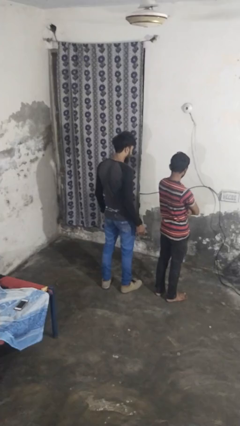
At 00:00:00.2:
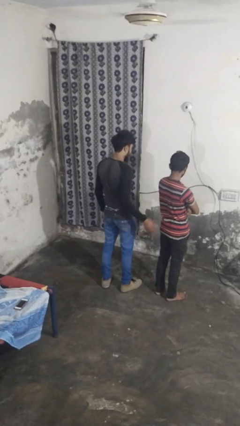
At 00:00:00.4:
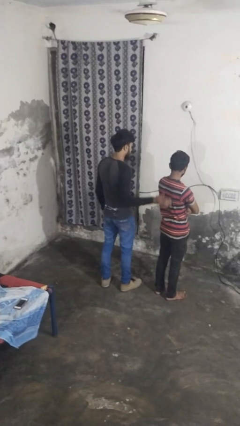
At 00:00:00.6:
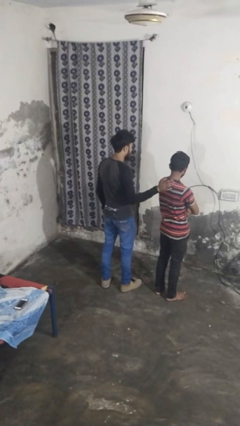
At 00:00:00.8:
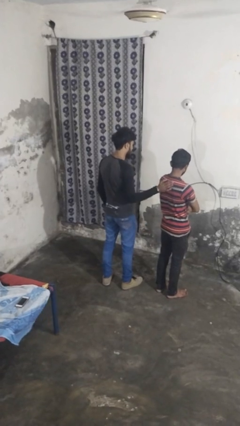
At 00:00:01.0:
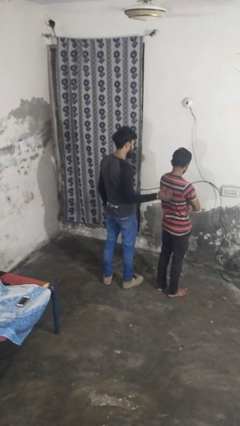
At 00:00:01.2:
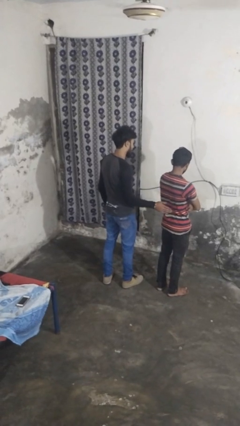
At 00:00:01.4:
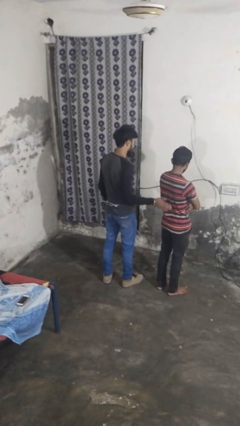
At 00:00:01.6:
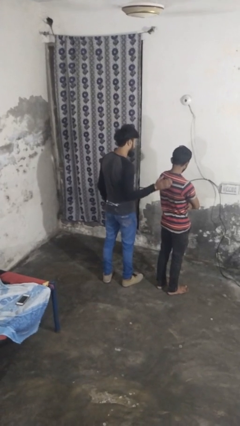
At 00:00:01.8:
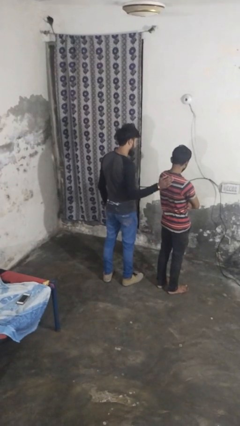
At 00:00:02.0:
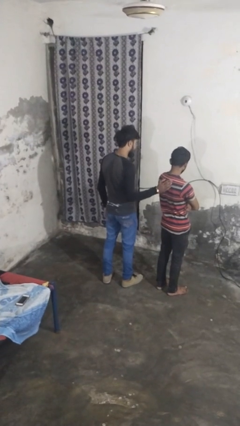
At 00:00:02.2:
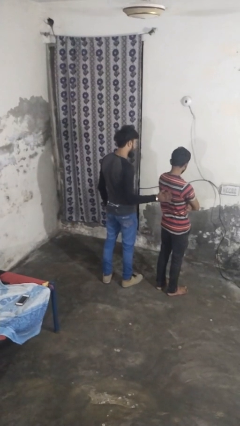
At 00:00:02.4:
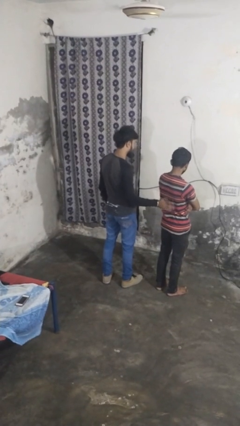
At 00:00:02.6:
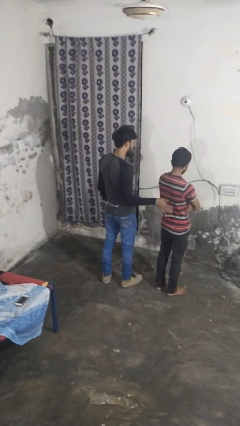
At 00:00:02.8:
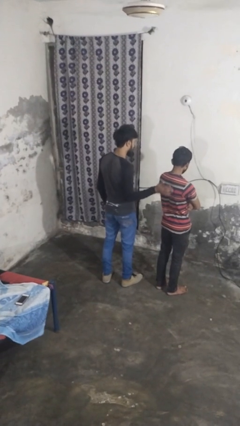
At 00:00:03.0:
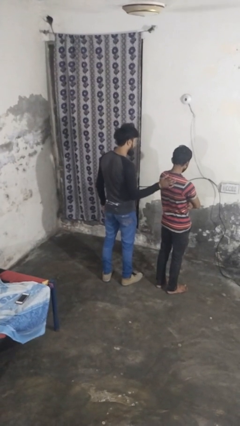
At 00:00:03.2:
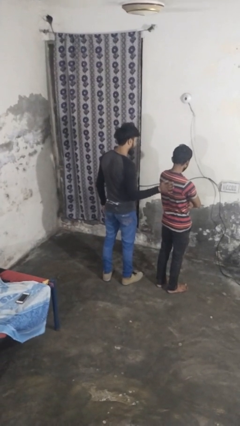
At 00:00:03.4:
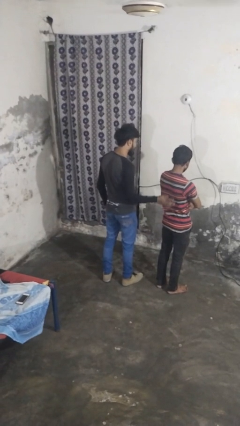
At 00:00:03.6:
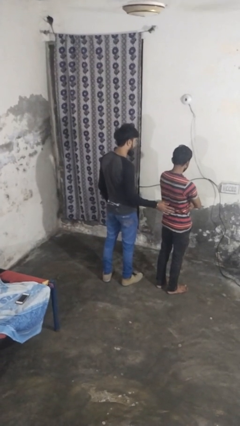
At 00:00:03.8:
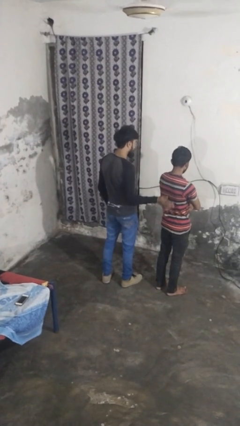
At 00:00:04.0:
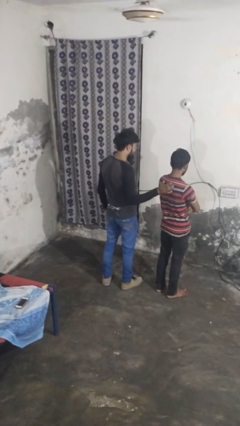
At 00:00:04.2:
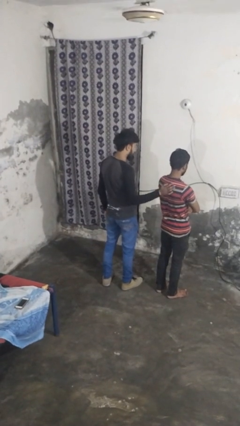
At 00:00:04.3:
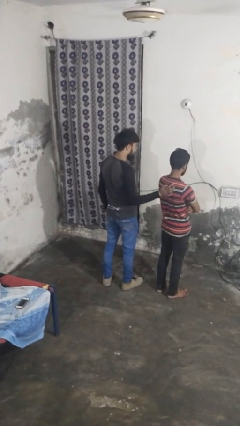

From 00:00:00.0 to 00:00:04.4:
person touches back of person

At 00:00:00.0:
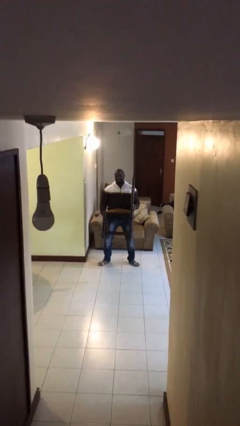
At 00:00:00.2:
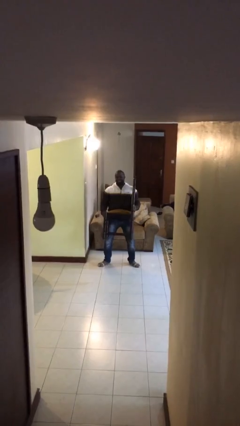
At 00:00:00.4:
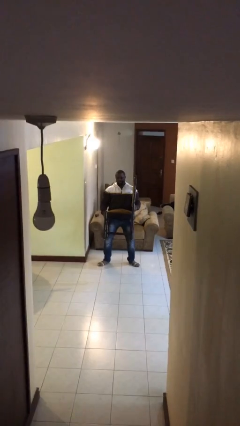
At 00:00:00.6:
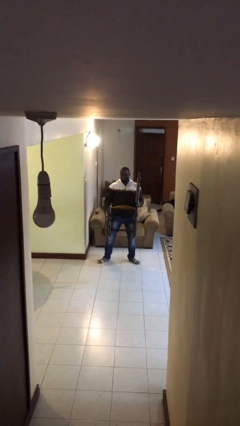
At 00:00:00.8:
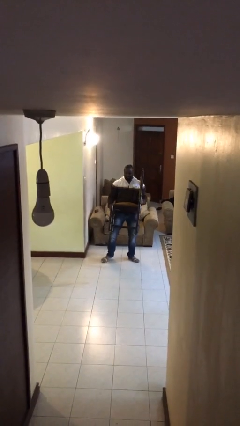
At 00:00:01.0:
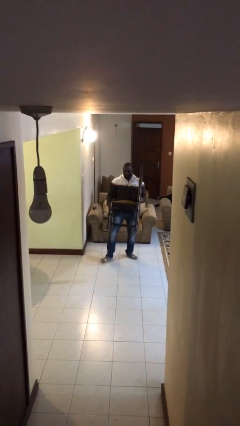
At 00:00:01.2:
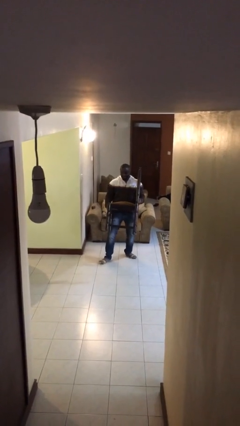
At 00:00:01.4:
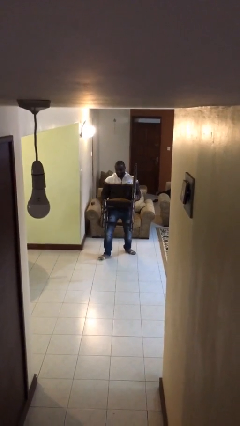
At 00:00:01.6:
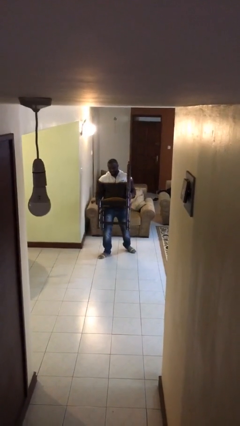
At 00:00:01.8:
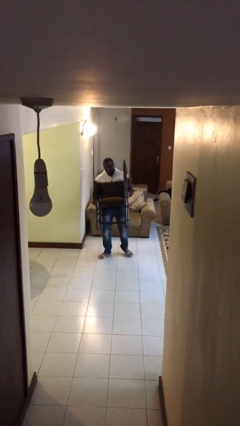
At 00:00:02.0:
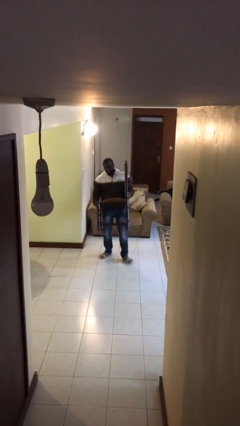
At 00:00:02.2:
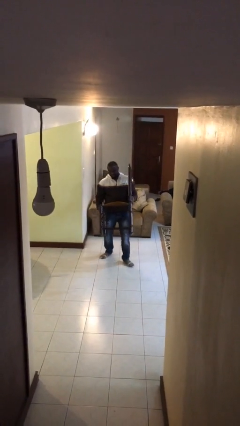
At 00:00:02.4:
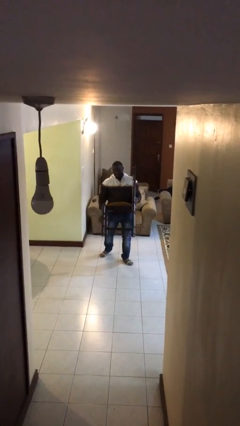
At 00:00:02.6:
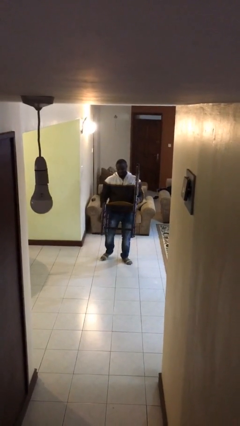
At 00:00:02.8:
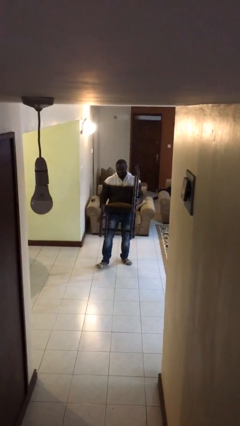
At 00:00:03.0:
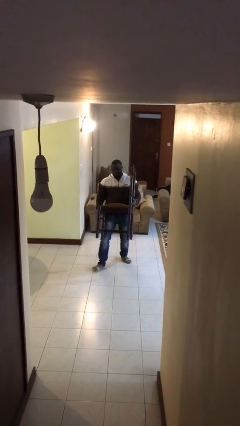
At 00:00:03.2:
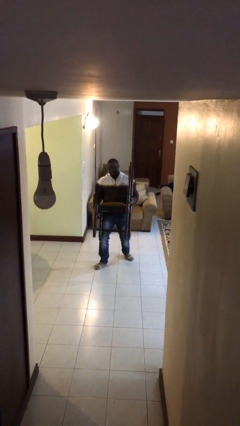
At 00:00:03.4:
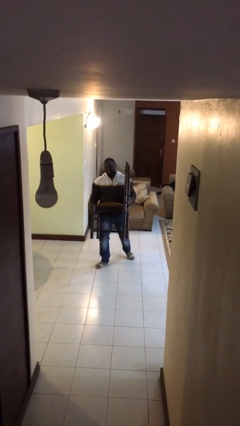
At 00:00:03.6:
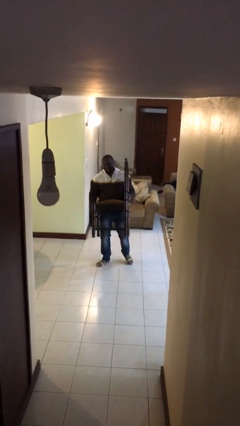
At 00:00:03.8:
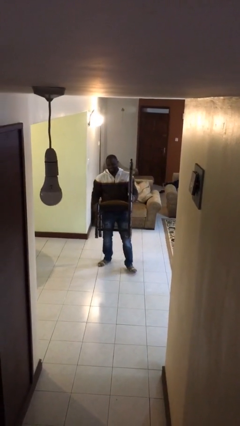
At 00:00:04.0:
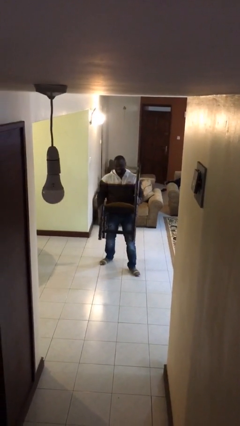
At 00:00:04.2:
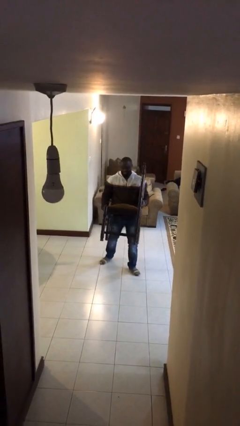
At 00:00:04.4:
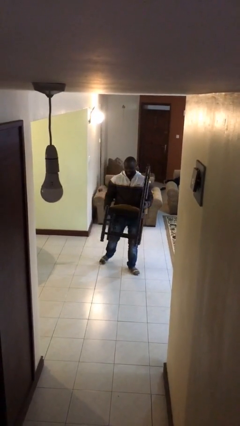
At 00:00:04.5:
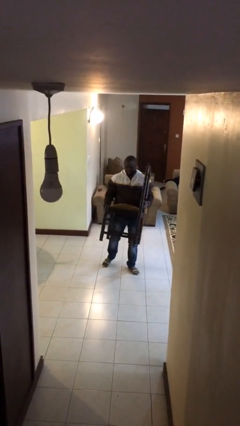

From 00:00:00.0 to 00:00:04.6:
person carries heavy object

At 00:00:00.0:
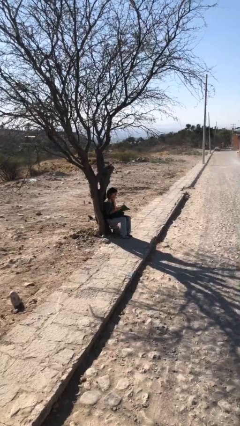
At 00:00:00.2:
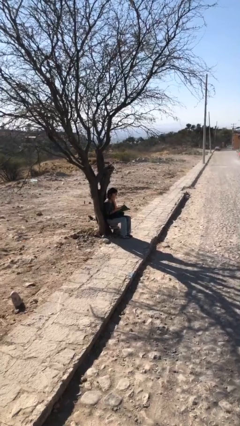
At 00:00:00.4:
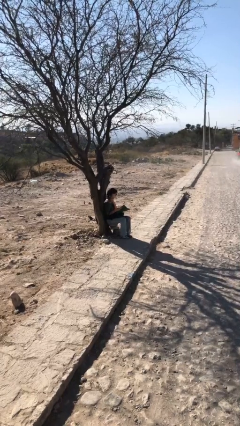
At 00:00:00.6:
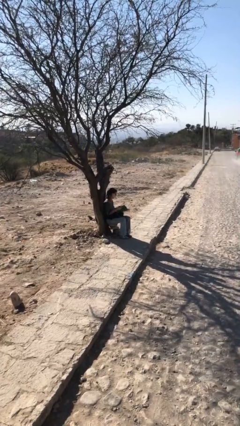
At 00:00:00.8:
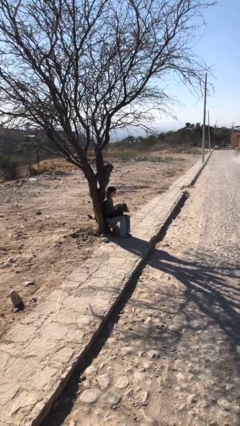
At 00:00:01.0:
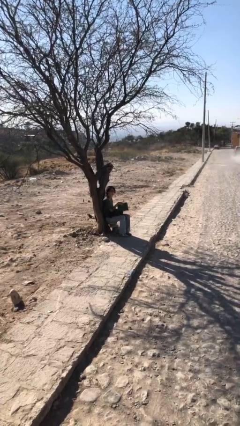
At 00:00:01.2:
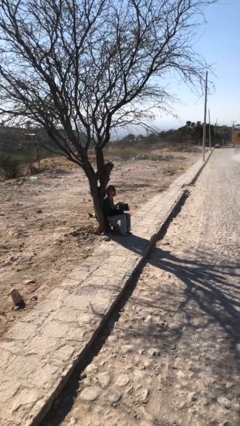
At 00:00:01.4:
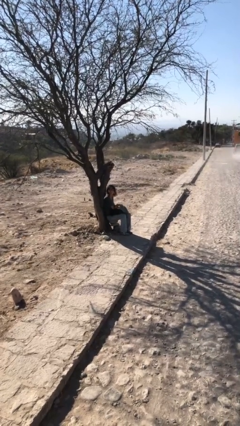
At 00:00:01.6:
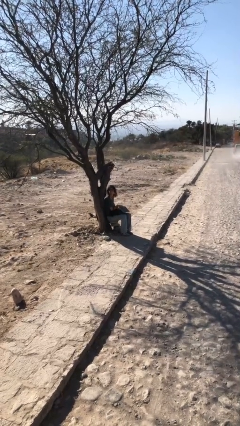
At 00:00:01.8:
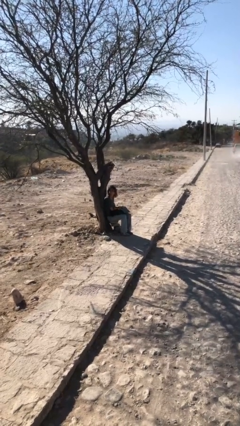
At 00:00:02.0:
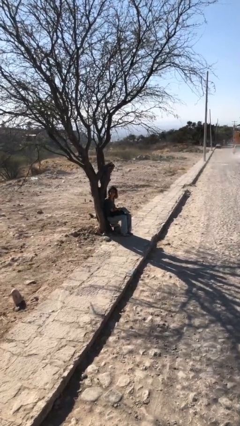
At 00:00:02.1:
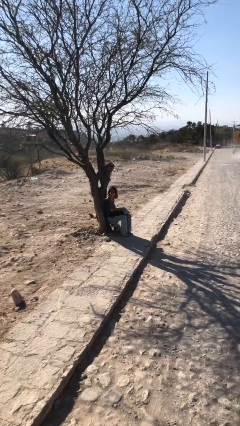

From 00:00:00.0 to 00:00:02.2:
person reads document

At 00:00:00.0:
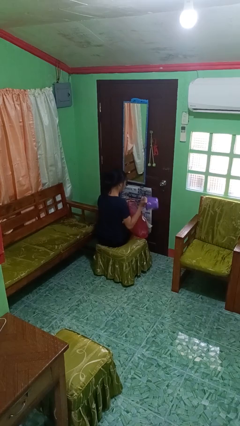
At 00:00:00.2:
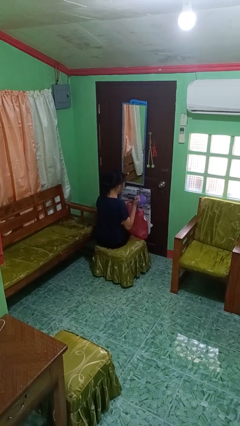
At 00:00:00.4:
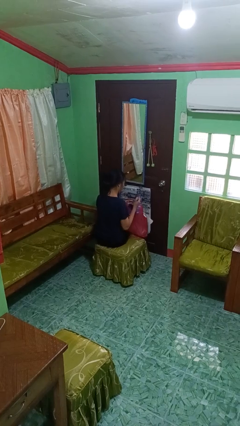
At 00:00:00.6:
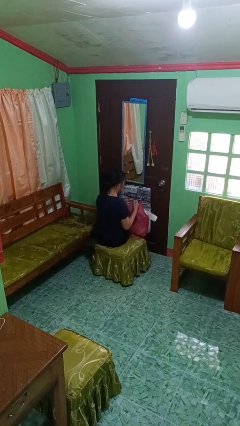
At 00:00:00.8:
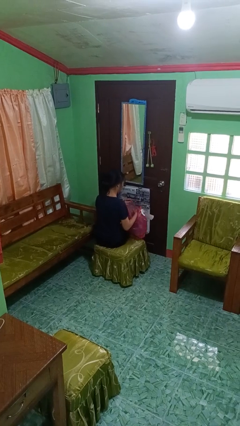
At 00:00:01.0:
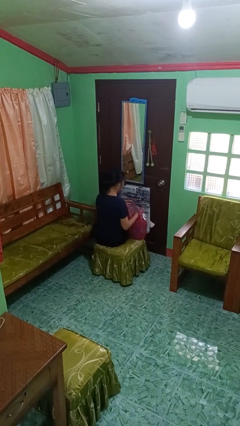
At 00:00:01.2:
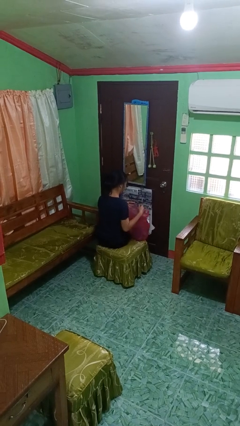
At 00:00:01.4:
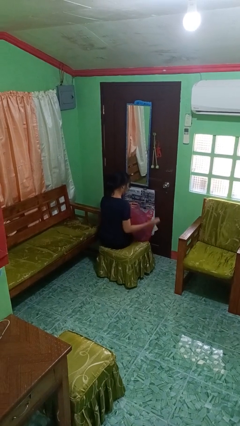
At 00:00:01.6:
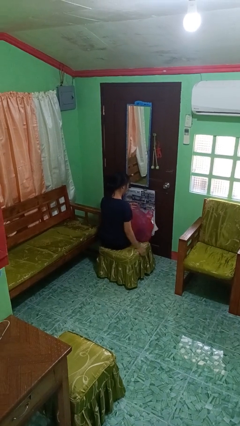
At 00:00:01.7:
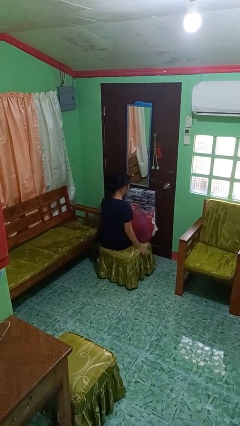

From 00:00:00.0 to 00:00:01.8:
person puts object into bag

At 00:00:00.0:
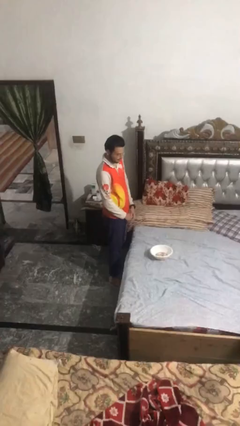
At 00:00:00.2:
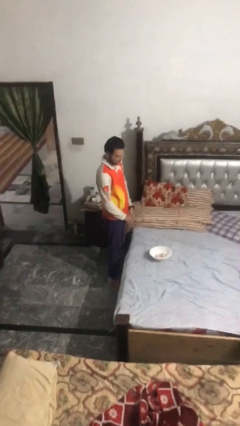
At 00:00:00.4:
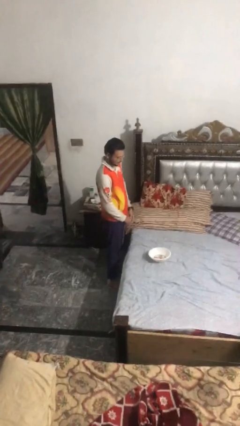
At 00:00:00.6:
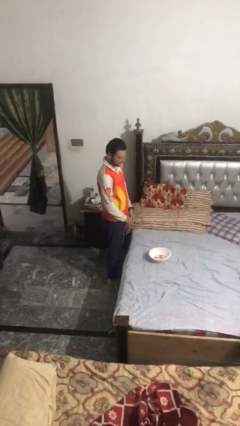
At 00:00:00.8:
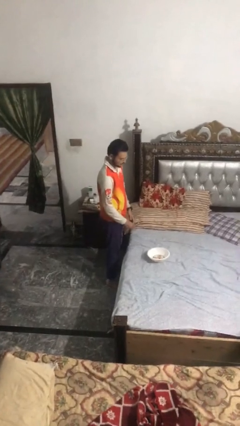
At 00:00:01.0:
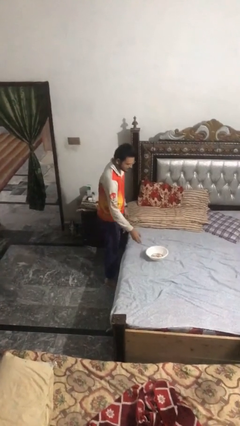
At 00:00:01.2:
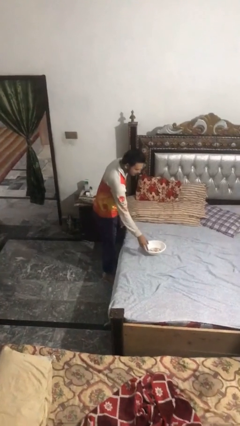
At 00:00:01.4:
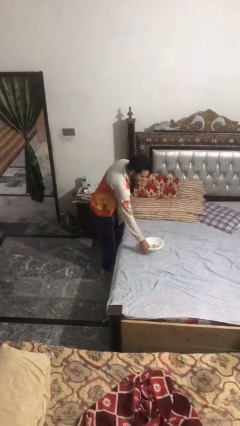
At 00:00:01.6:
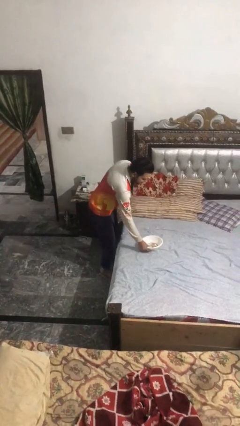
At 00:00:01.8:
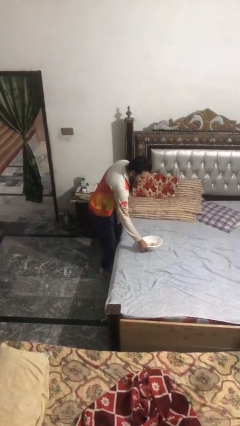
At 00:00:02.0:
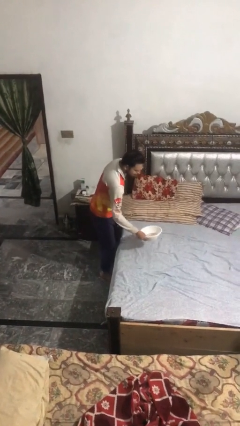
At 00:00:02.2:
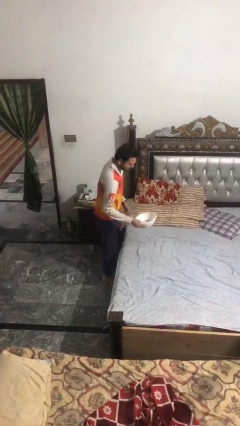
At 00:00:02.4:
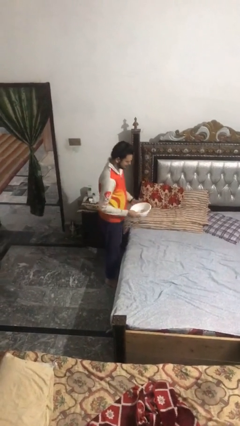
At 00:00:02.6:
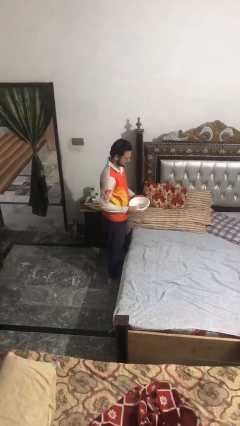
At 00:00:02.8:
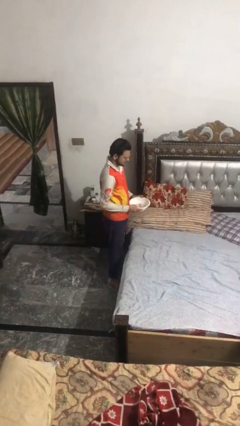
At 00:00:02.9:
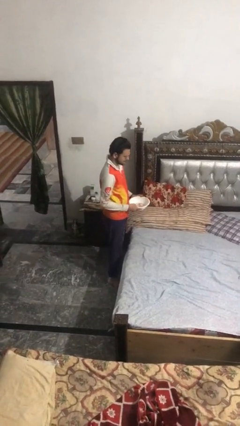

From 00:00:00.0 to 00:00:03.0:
person picks up object from countertop

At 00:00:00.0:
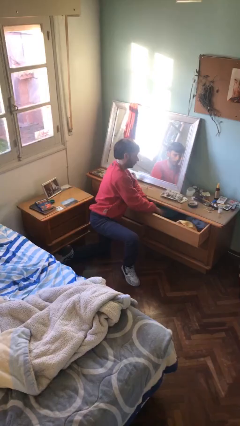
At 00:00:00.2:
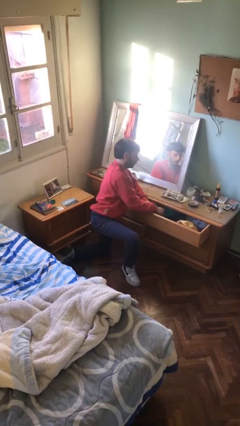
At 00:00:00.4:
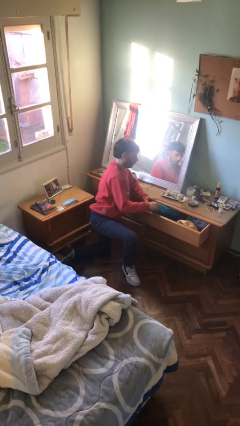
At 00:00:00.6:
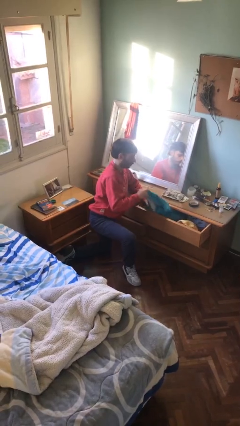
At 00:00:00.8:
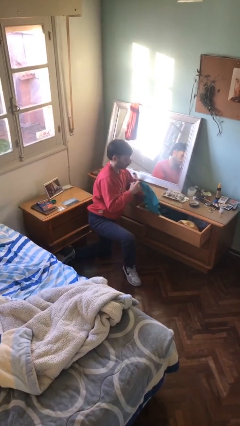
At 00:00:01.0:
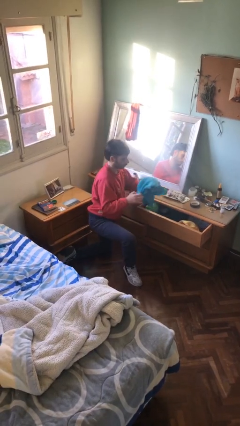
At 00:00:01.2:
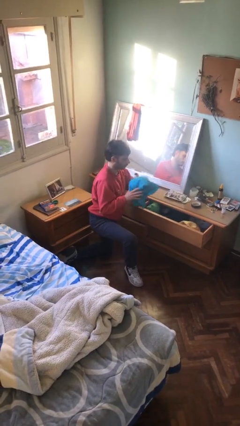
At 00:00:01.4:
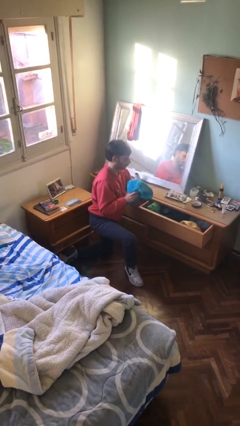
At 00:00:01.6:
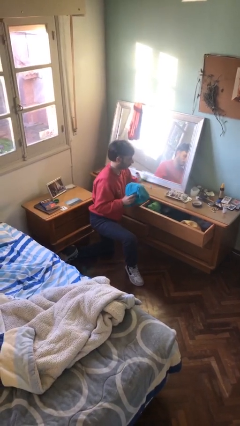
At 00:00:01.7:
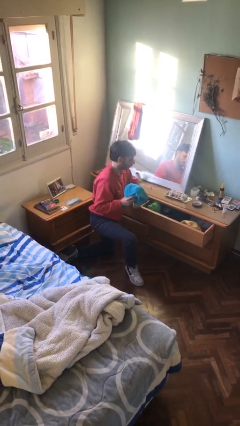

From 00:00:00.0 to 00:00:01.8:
person takes clothes from dresser
